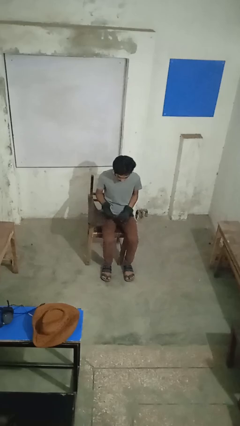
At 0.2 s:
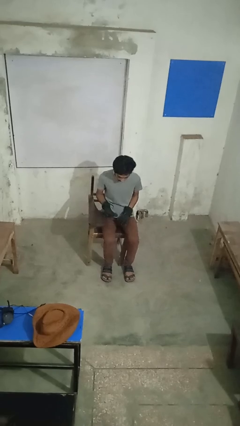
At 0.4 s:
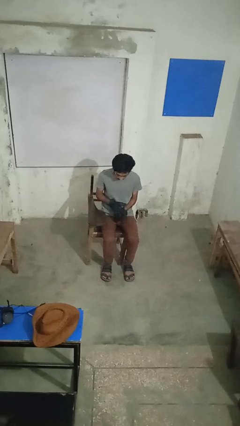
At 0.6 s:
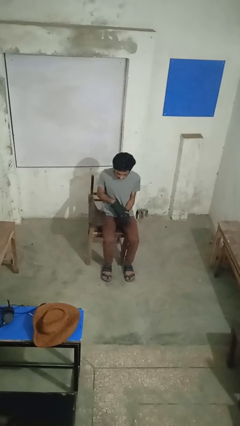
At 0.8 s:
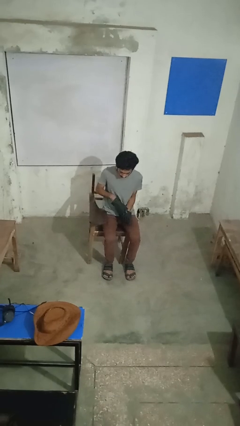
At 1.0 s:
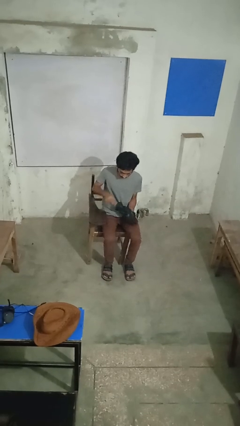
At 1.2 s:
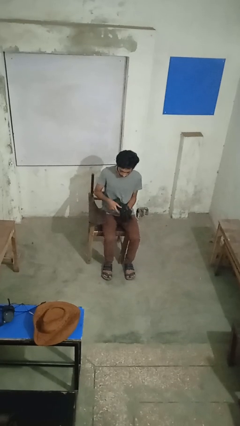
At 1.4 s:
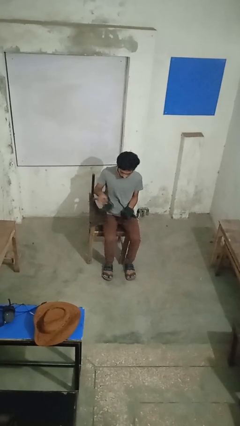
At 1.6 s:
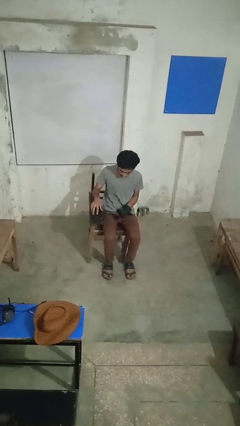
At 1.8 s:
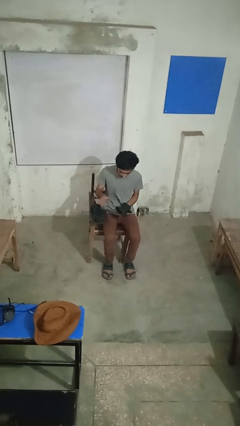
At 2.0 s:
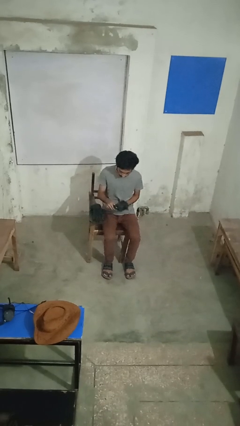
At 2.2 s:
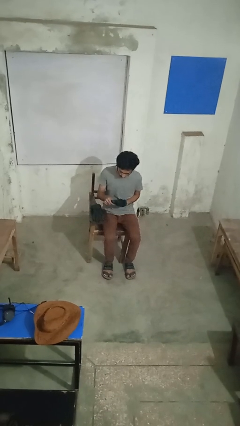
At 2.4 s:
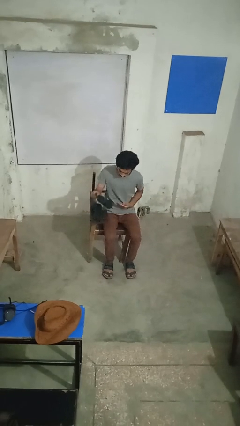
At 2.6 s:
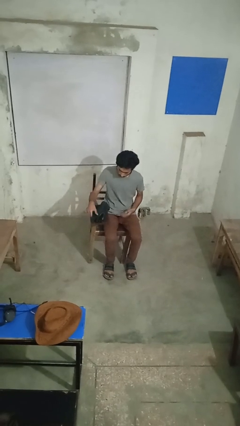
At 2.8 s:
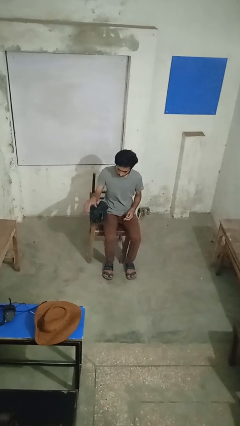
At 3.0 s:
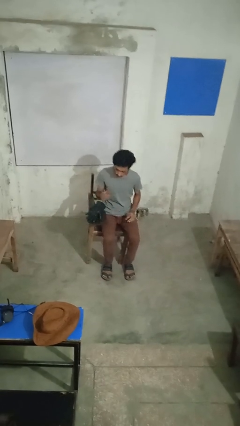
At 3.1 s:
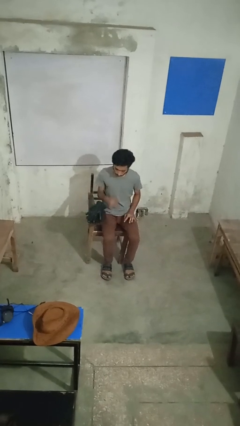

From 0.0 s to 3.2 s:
person takes off gloves

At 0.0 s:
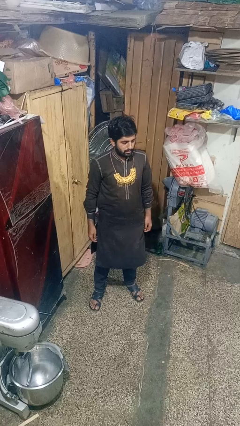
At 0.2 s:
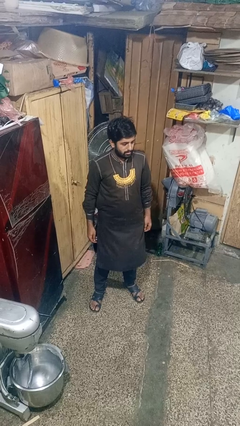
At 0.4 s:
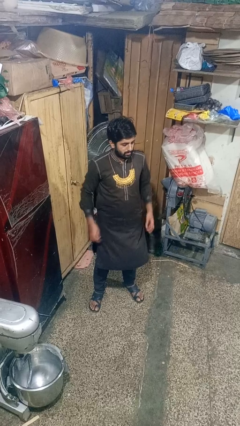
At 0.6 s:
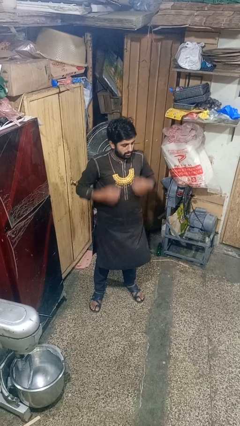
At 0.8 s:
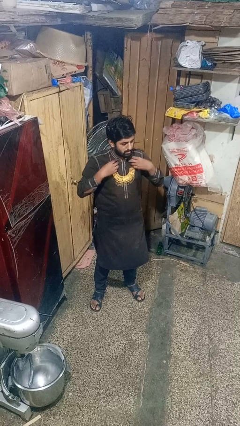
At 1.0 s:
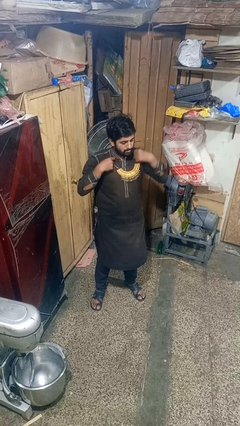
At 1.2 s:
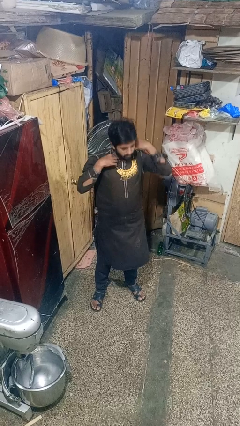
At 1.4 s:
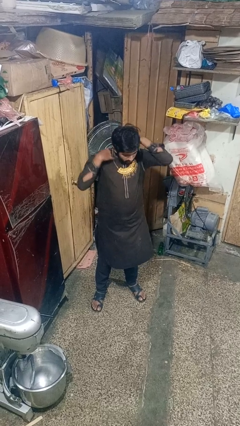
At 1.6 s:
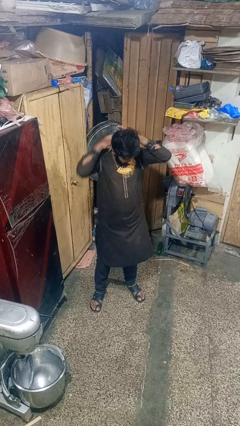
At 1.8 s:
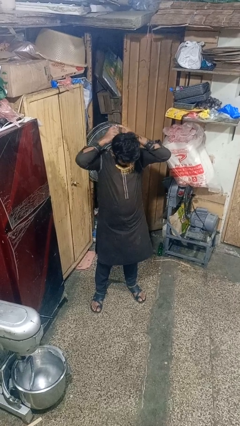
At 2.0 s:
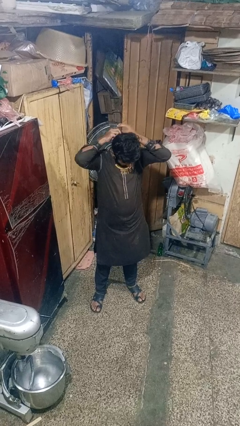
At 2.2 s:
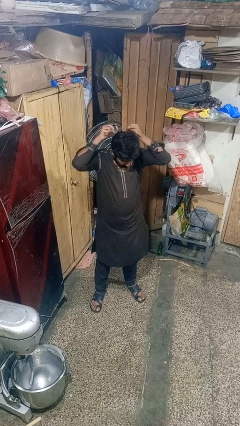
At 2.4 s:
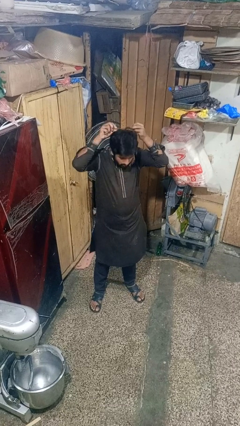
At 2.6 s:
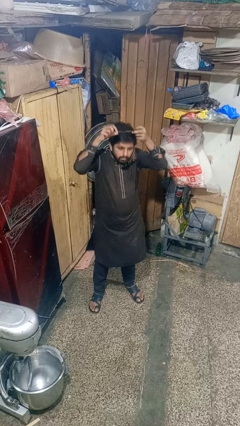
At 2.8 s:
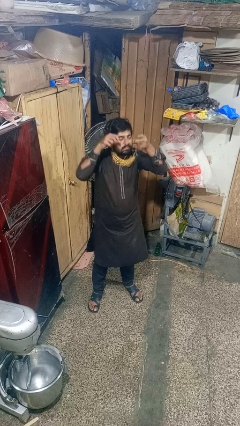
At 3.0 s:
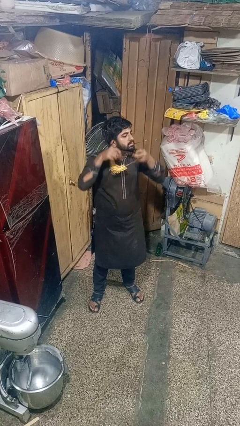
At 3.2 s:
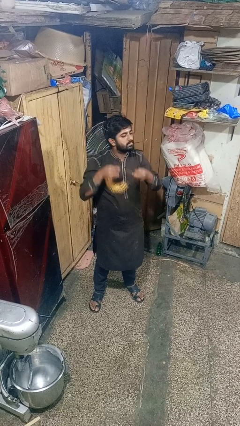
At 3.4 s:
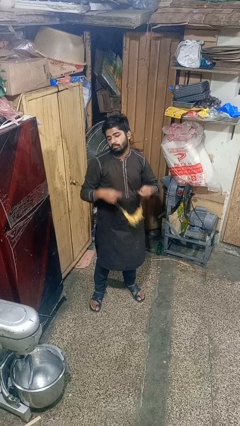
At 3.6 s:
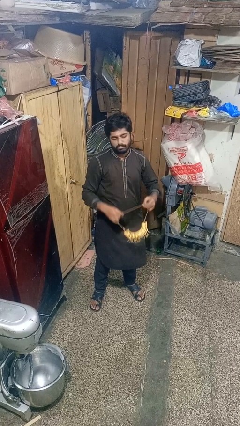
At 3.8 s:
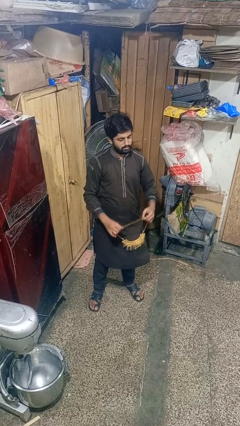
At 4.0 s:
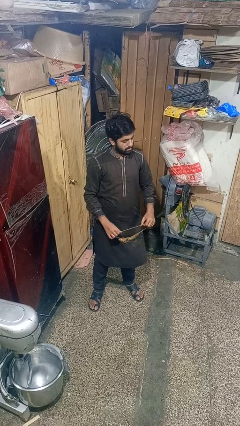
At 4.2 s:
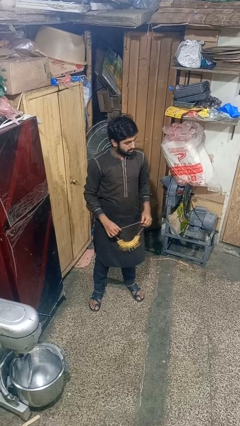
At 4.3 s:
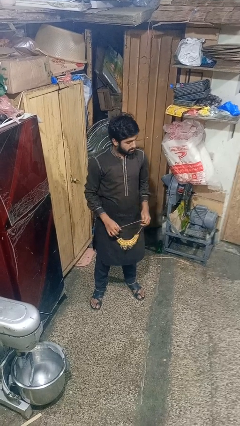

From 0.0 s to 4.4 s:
person takes off necklace

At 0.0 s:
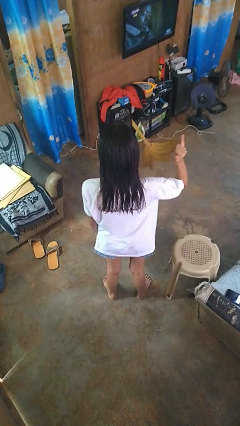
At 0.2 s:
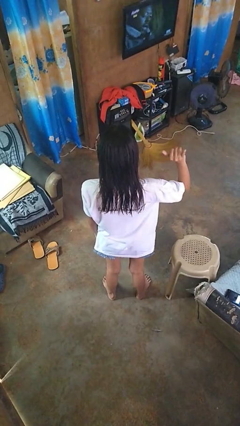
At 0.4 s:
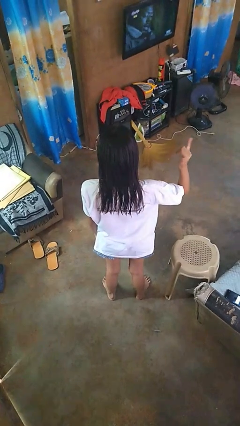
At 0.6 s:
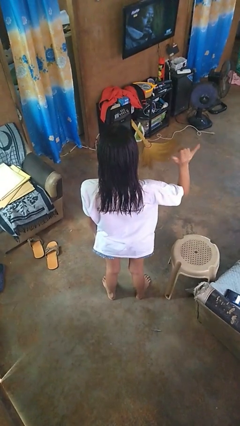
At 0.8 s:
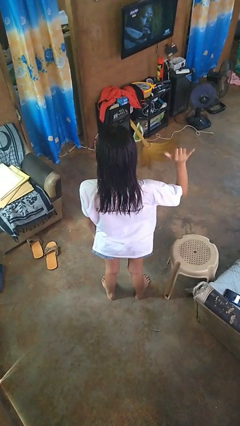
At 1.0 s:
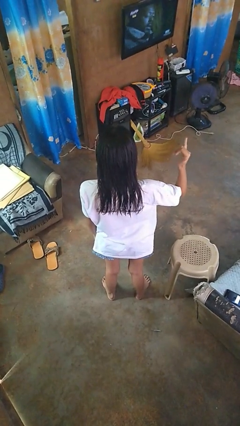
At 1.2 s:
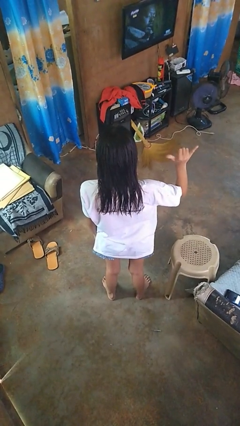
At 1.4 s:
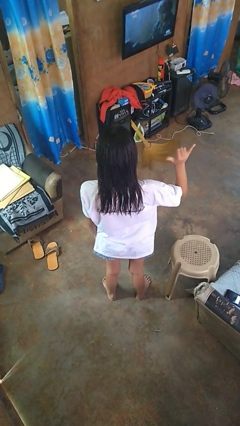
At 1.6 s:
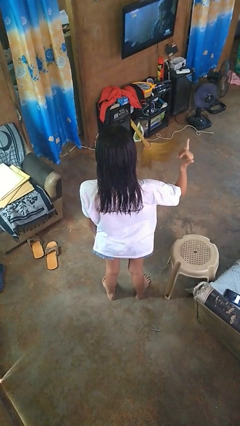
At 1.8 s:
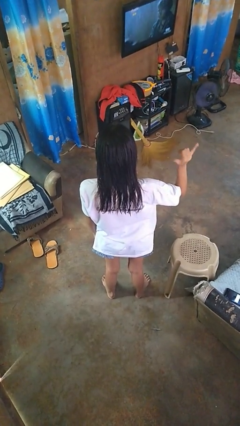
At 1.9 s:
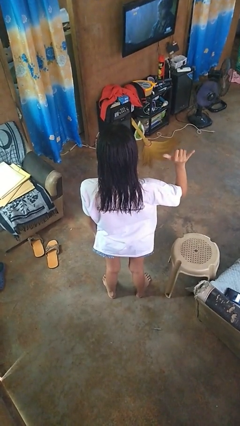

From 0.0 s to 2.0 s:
person gestures hang loose

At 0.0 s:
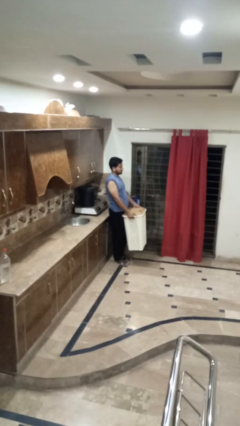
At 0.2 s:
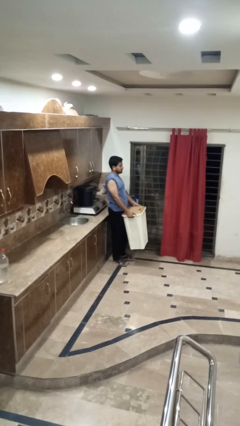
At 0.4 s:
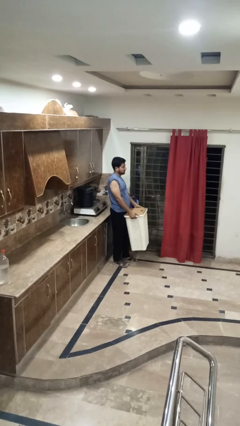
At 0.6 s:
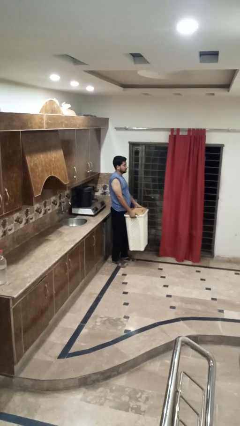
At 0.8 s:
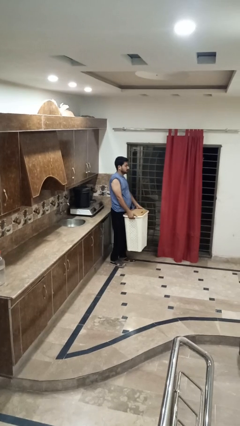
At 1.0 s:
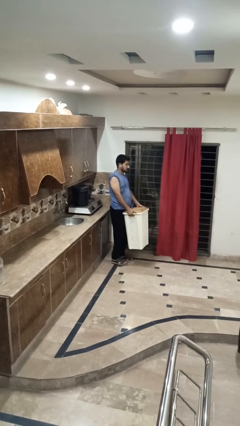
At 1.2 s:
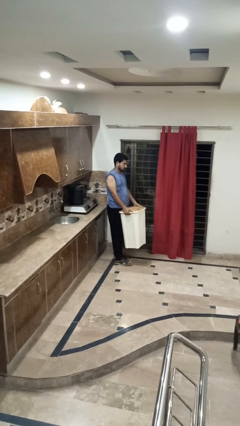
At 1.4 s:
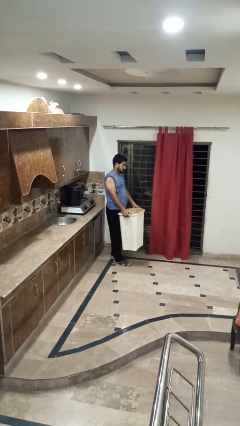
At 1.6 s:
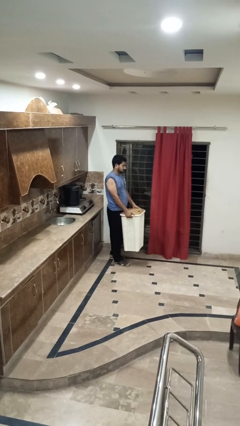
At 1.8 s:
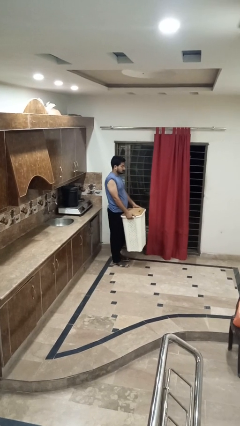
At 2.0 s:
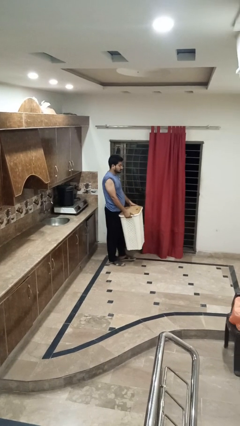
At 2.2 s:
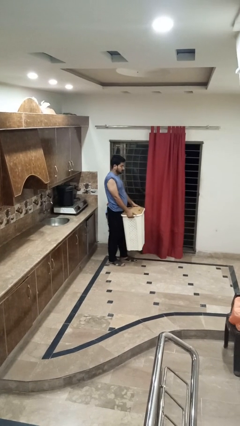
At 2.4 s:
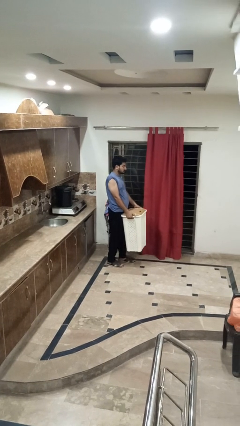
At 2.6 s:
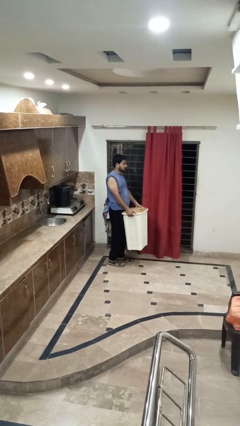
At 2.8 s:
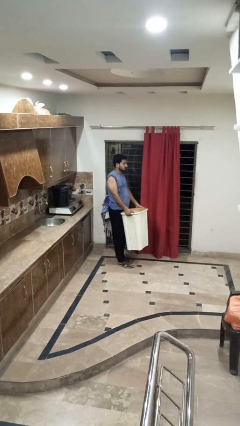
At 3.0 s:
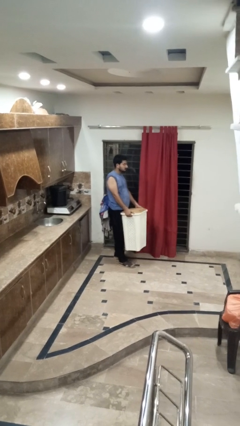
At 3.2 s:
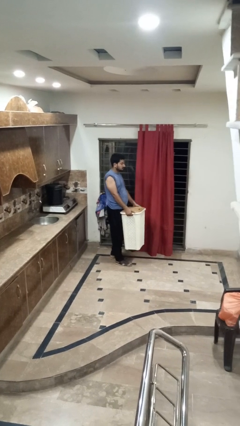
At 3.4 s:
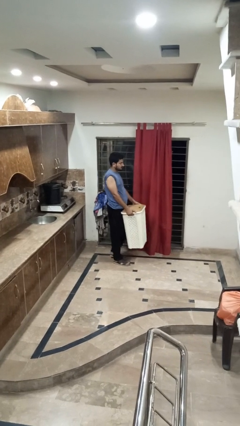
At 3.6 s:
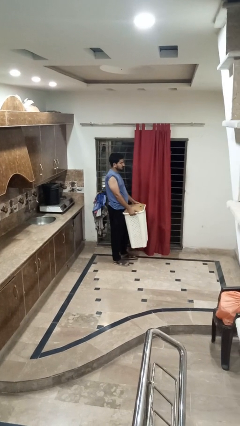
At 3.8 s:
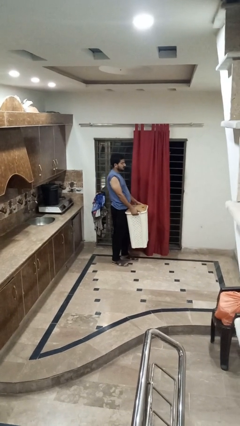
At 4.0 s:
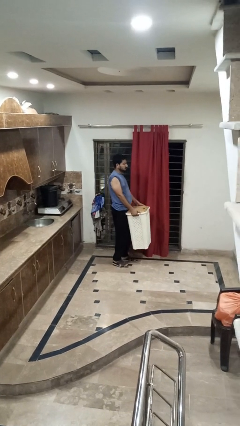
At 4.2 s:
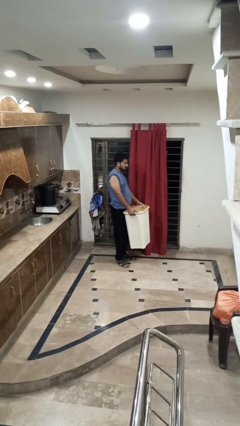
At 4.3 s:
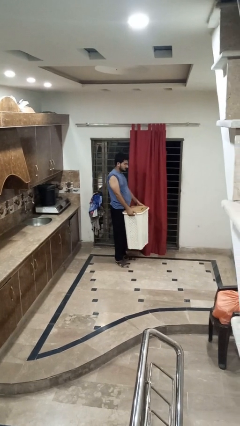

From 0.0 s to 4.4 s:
person carries laundry basket

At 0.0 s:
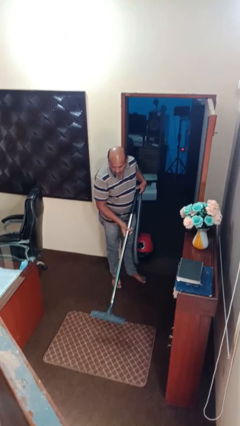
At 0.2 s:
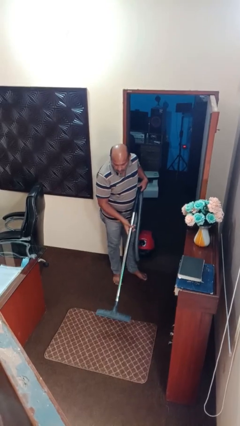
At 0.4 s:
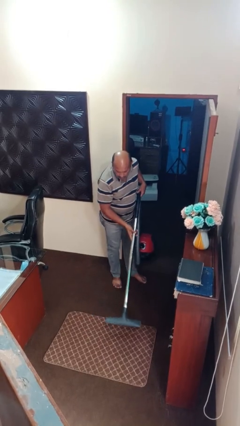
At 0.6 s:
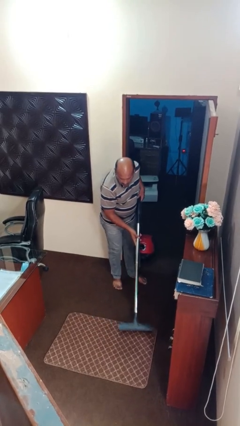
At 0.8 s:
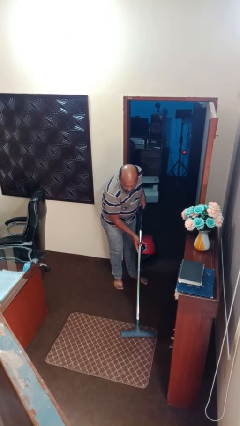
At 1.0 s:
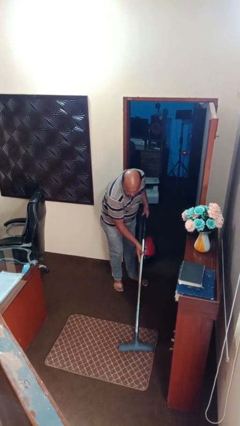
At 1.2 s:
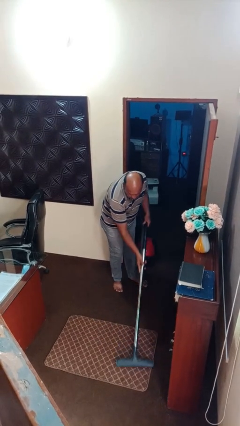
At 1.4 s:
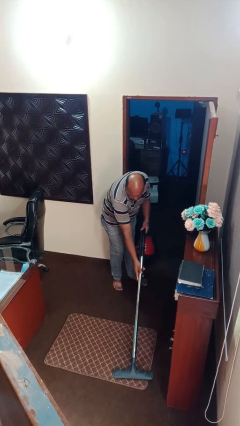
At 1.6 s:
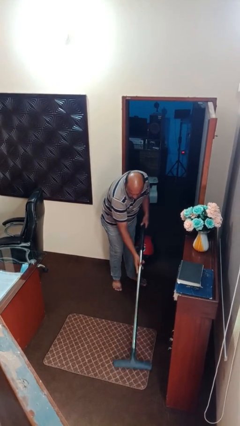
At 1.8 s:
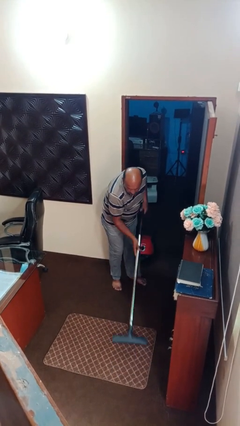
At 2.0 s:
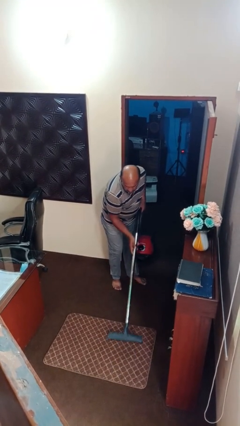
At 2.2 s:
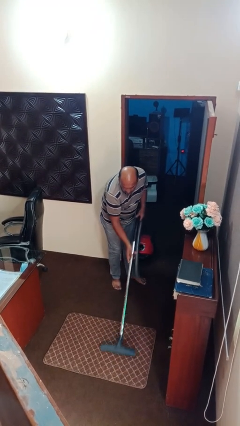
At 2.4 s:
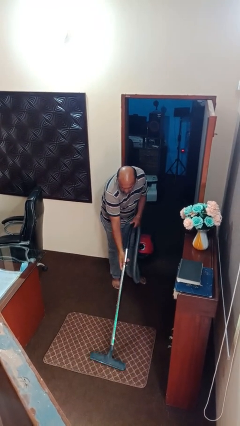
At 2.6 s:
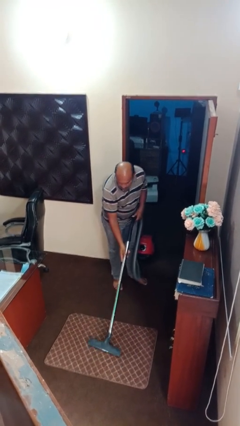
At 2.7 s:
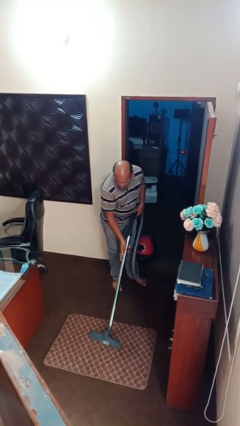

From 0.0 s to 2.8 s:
person vacuums carpet

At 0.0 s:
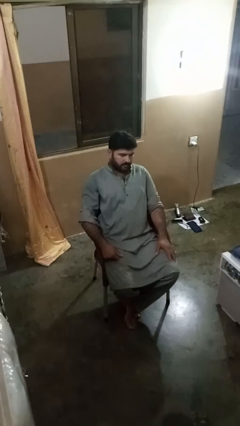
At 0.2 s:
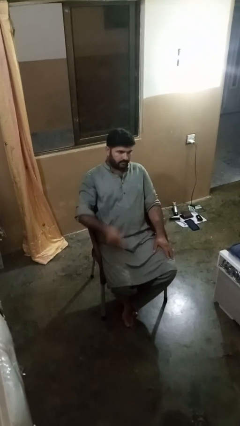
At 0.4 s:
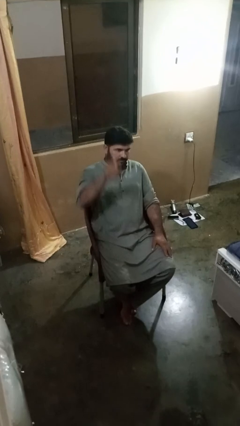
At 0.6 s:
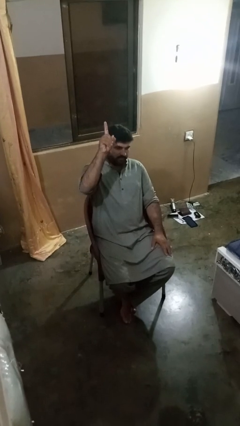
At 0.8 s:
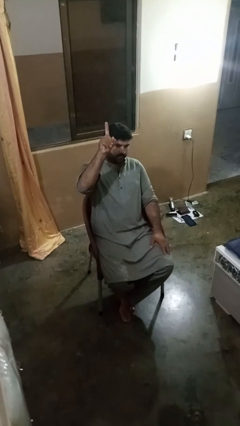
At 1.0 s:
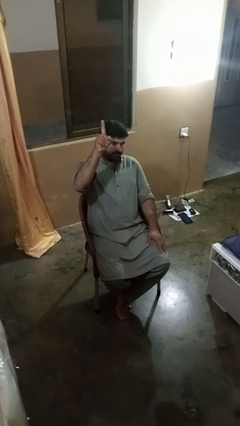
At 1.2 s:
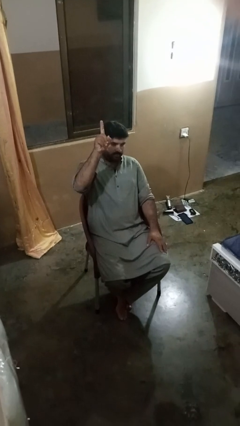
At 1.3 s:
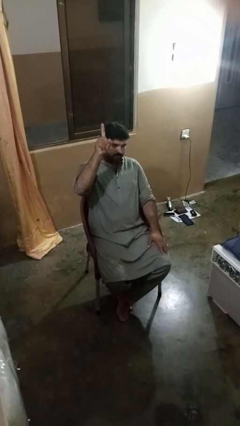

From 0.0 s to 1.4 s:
person gestures number one
